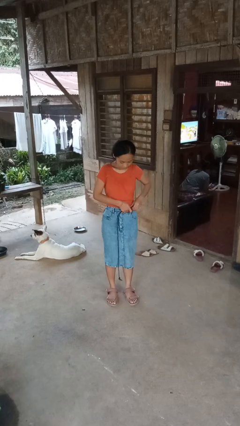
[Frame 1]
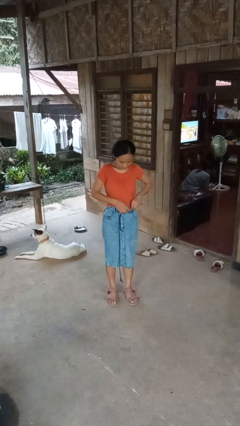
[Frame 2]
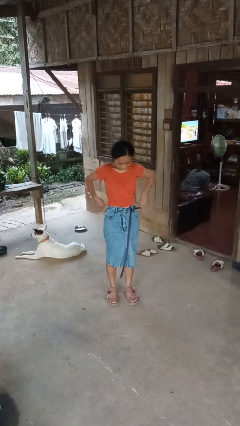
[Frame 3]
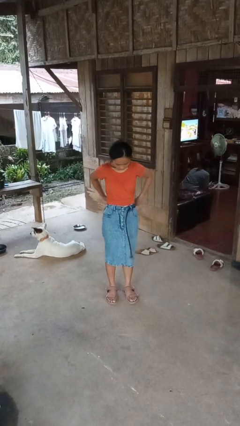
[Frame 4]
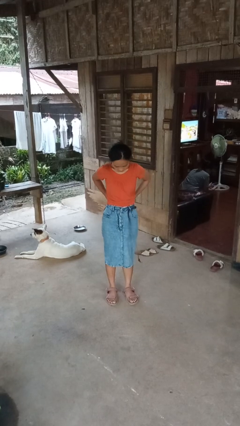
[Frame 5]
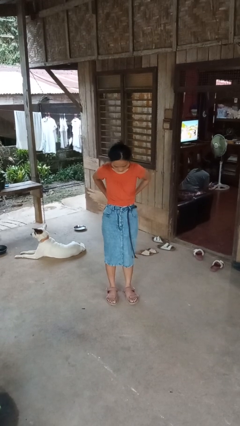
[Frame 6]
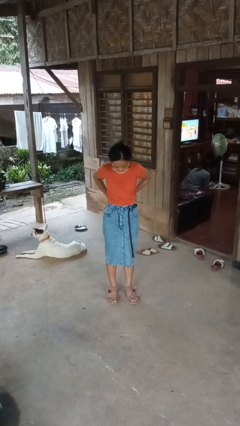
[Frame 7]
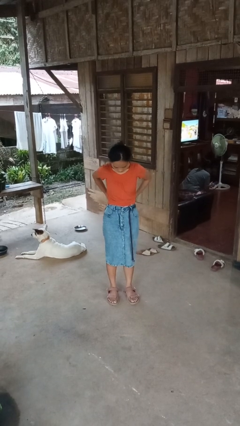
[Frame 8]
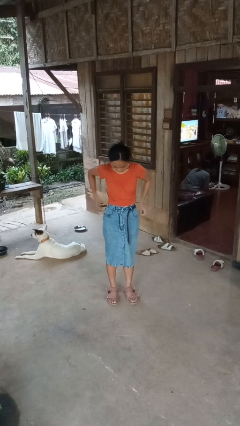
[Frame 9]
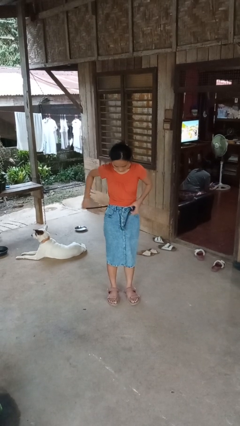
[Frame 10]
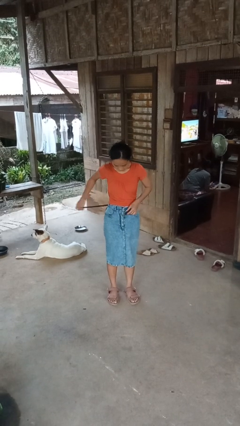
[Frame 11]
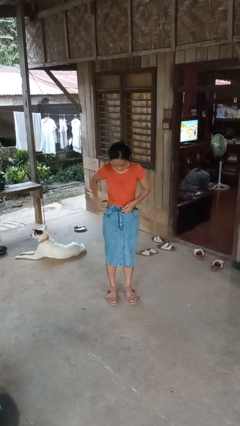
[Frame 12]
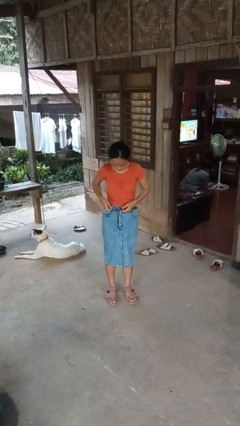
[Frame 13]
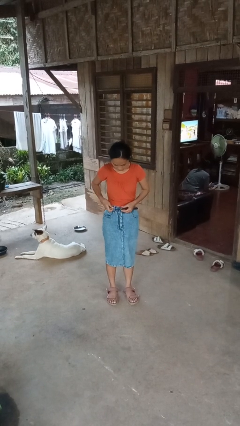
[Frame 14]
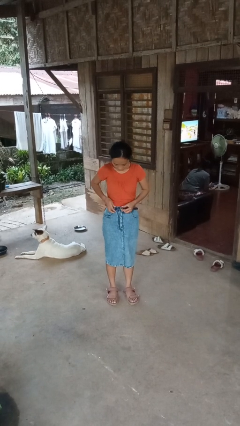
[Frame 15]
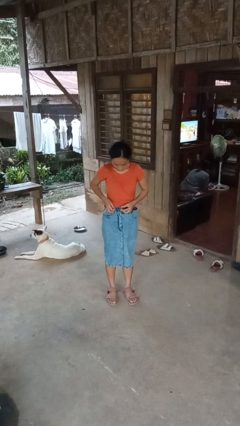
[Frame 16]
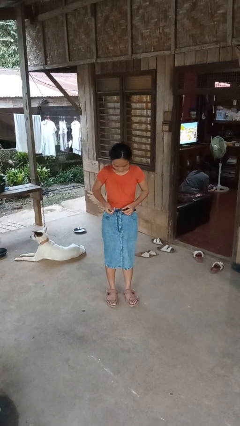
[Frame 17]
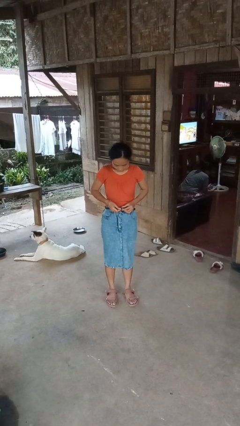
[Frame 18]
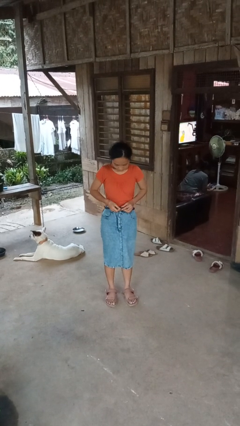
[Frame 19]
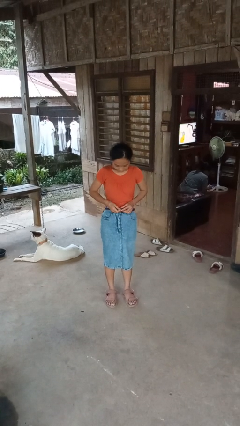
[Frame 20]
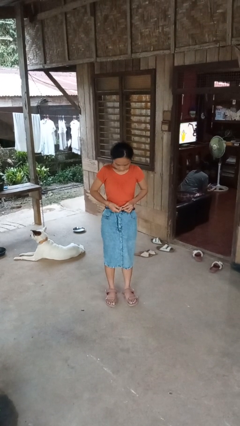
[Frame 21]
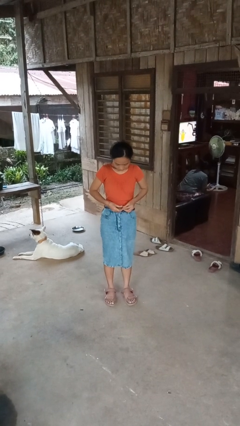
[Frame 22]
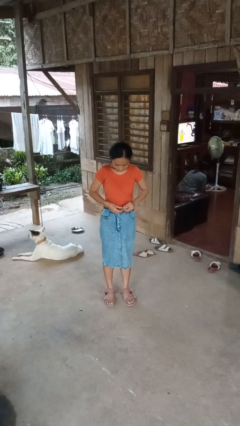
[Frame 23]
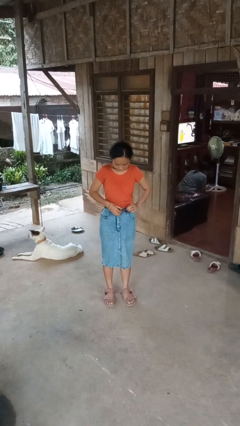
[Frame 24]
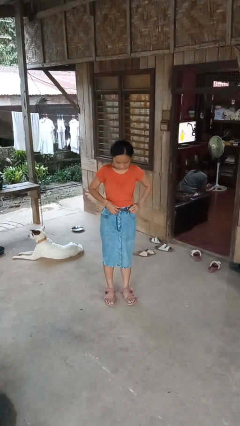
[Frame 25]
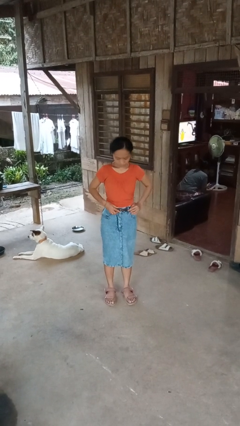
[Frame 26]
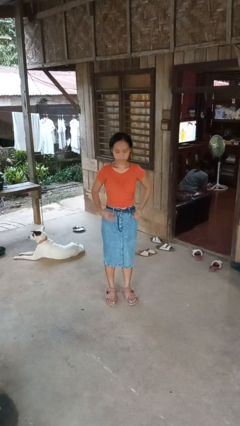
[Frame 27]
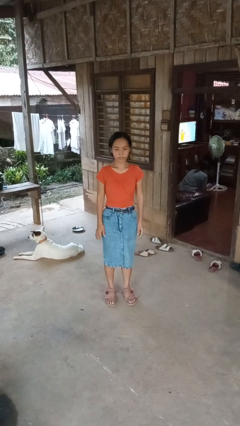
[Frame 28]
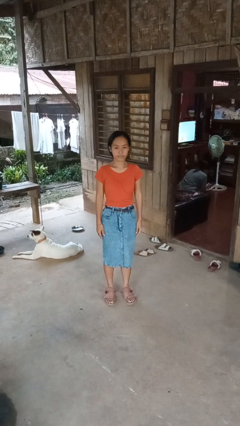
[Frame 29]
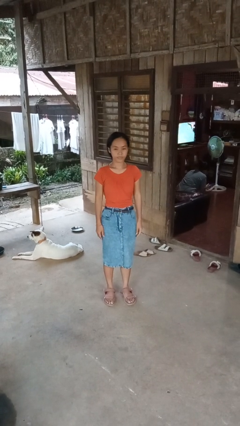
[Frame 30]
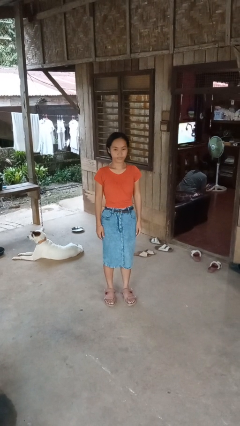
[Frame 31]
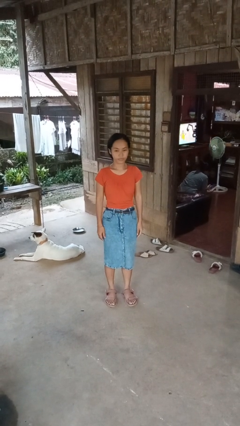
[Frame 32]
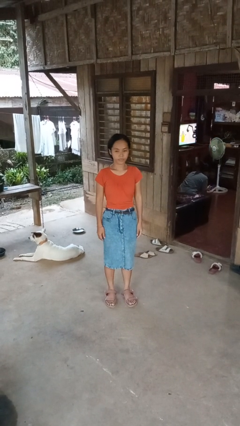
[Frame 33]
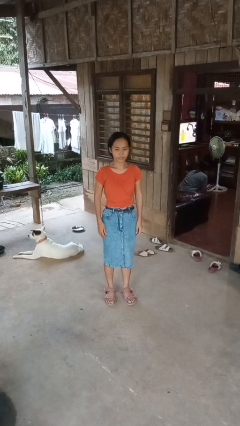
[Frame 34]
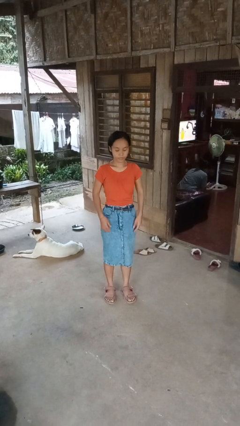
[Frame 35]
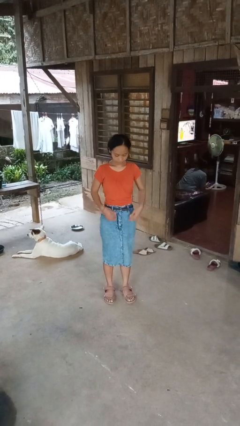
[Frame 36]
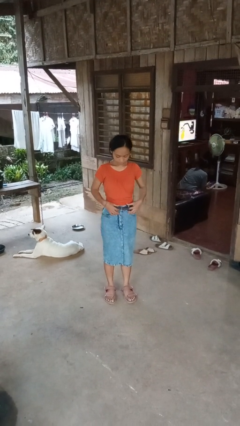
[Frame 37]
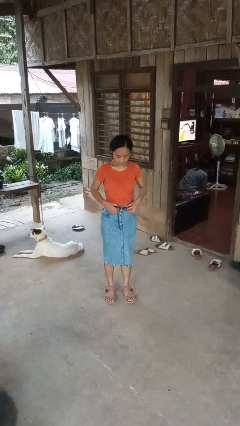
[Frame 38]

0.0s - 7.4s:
person puts on belt

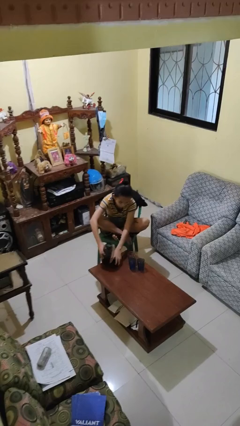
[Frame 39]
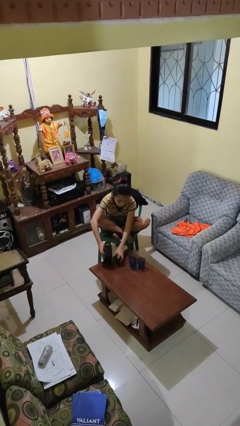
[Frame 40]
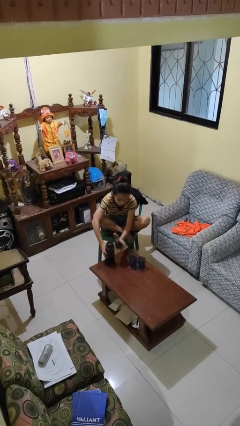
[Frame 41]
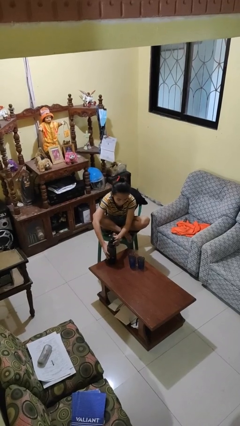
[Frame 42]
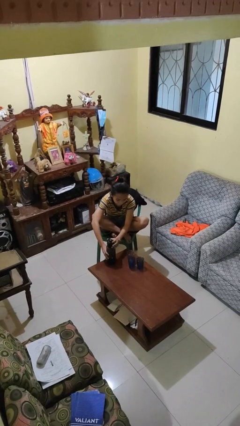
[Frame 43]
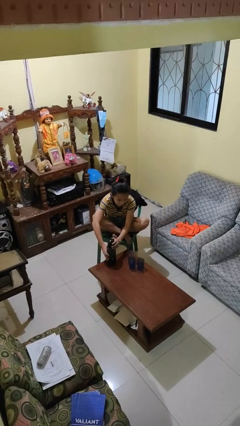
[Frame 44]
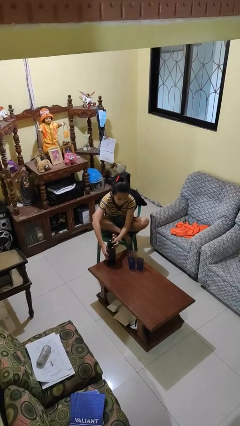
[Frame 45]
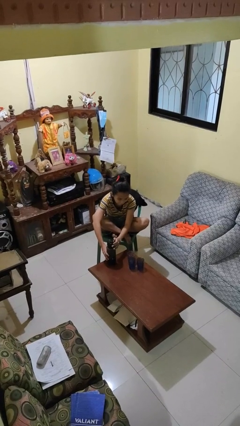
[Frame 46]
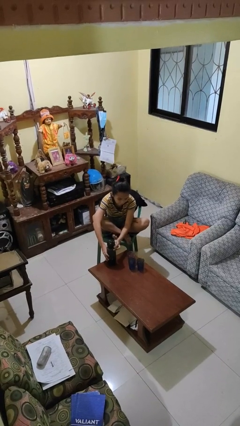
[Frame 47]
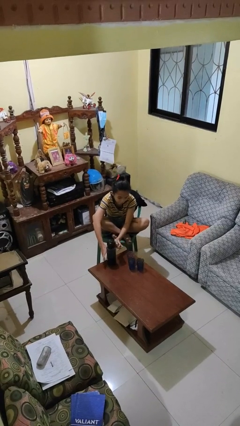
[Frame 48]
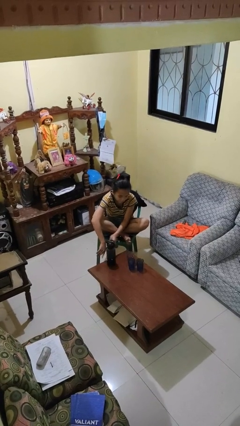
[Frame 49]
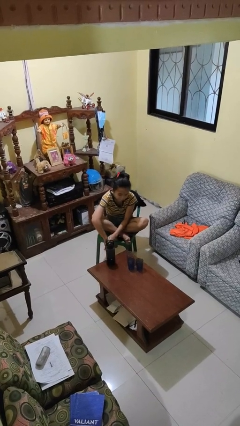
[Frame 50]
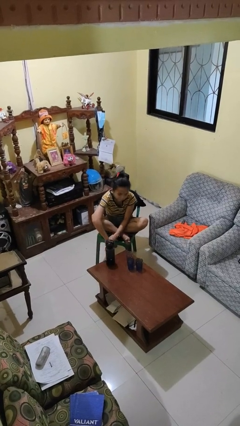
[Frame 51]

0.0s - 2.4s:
person screws lid to bottle

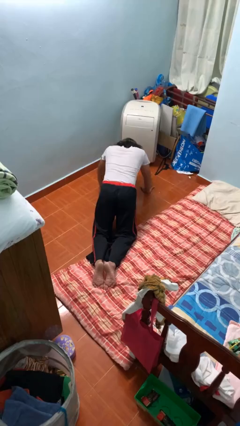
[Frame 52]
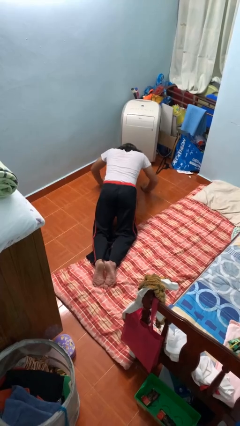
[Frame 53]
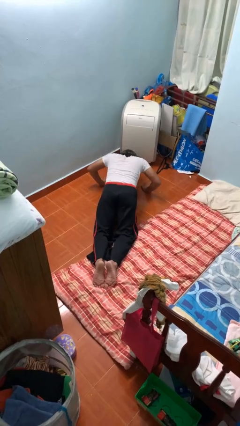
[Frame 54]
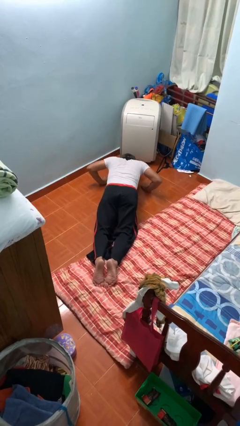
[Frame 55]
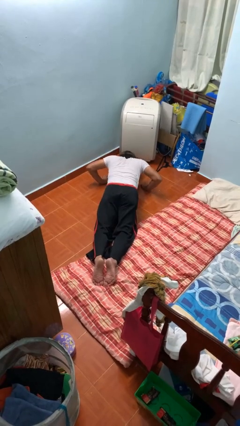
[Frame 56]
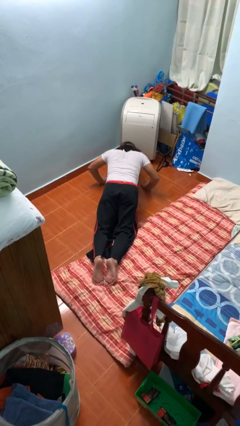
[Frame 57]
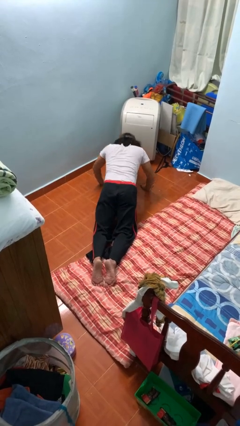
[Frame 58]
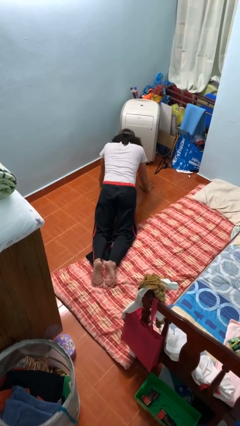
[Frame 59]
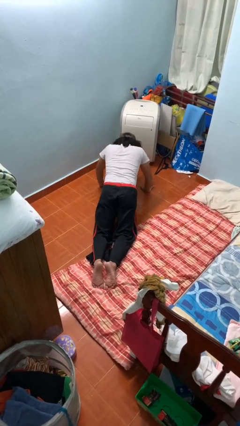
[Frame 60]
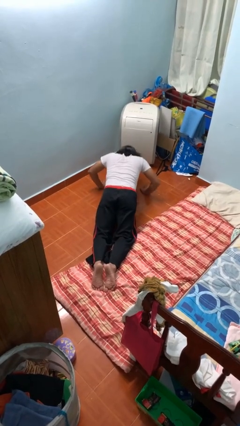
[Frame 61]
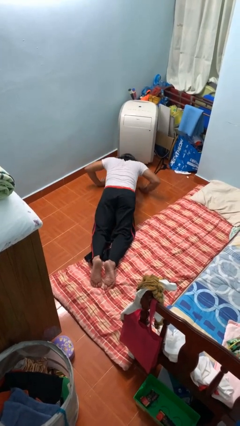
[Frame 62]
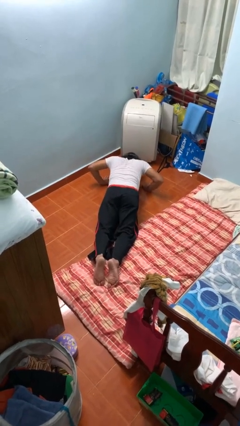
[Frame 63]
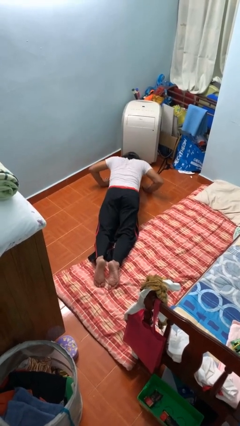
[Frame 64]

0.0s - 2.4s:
person exercises with pushup

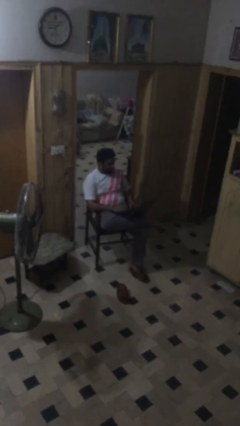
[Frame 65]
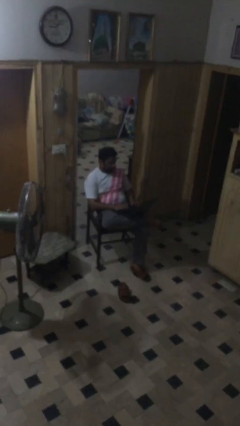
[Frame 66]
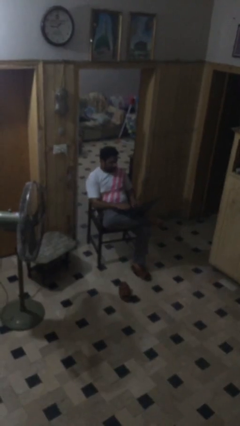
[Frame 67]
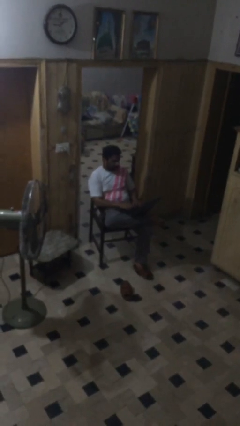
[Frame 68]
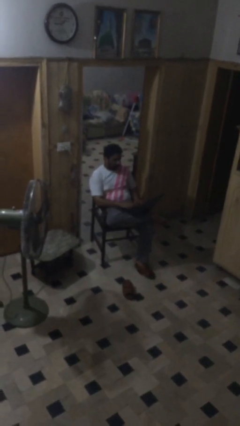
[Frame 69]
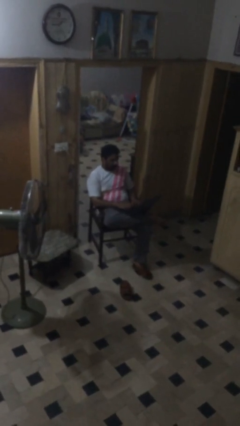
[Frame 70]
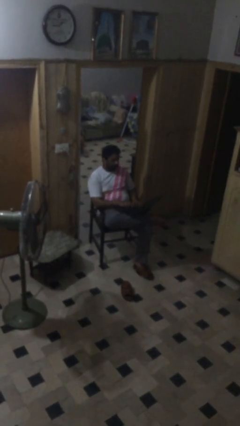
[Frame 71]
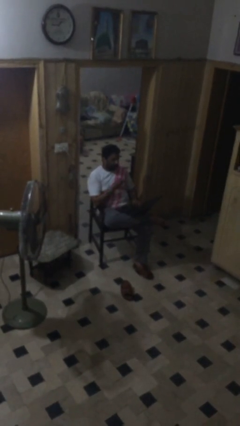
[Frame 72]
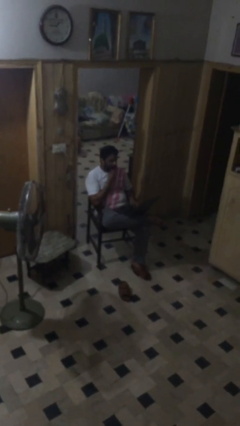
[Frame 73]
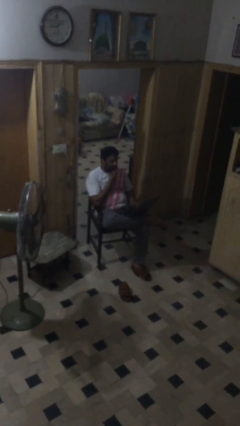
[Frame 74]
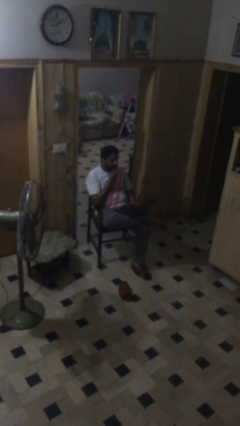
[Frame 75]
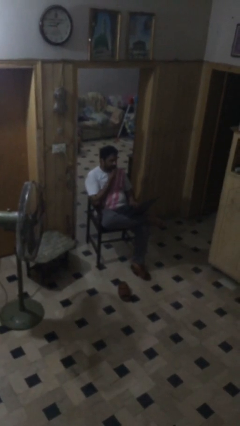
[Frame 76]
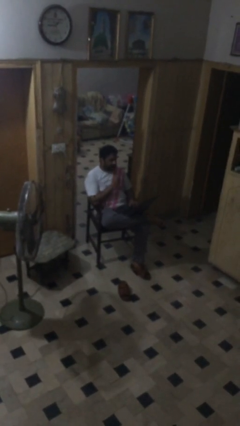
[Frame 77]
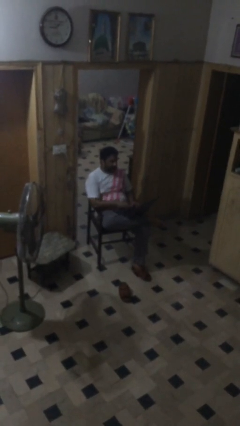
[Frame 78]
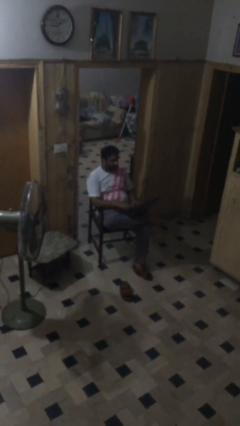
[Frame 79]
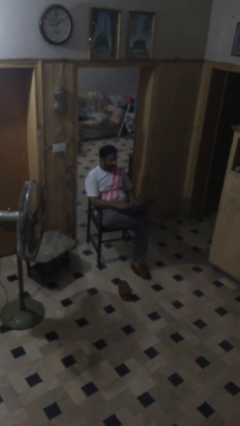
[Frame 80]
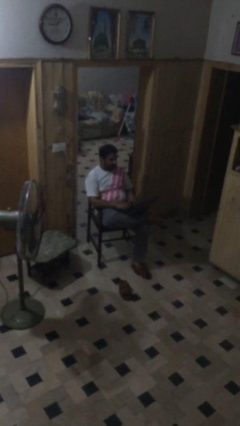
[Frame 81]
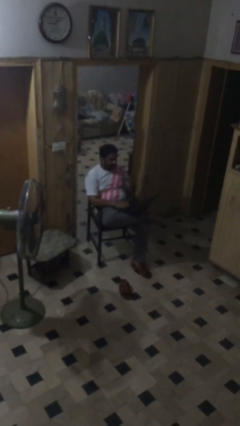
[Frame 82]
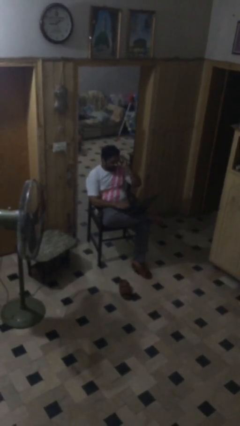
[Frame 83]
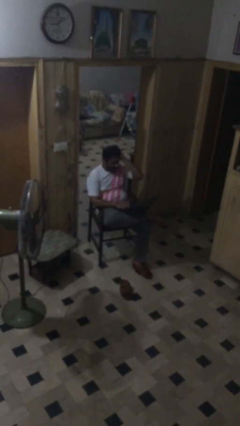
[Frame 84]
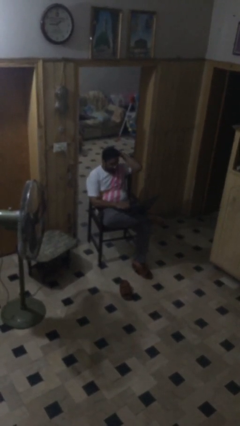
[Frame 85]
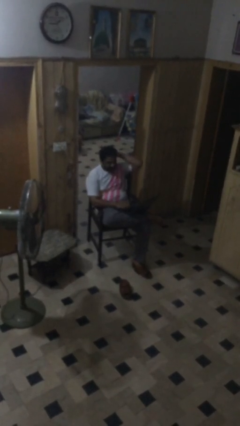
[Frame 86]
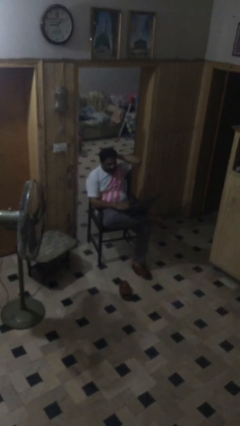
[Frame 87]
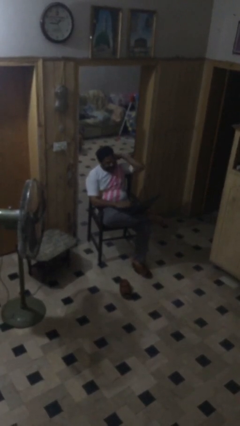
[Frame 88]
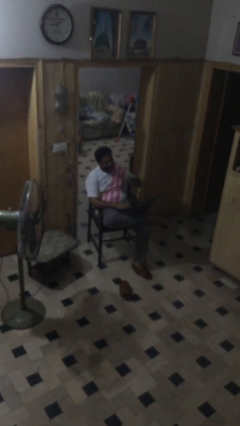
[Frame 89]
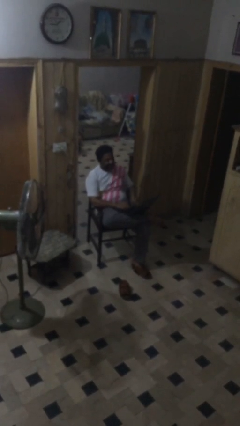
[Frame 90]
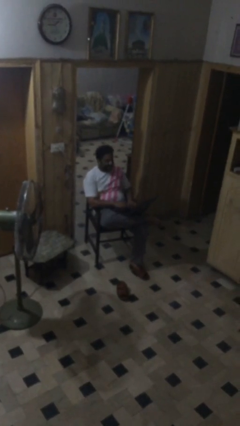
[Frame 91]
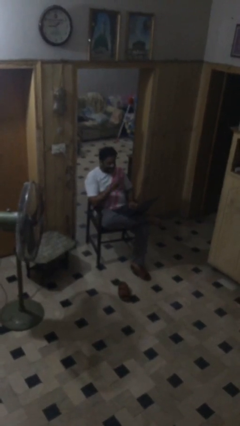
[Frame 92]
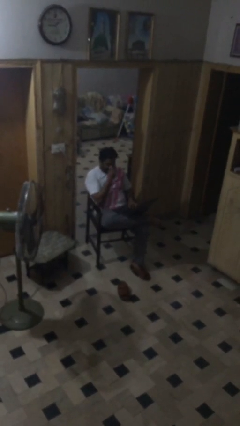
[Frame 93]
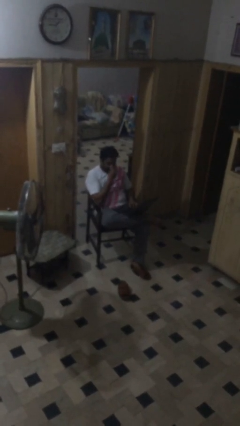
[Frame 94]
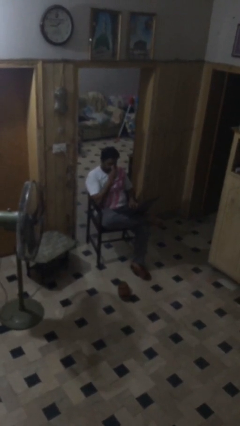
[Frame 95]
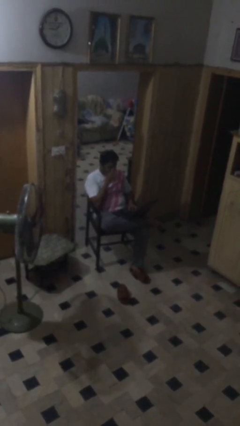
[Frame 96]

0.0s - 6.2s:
person interacts with laptop
